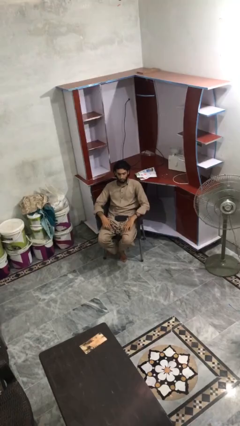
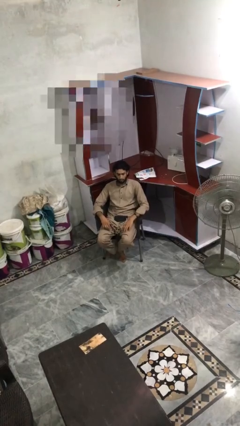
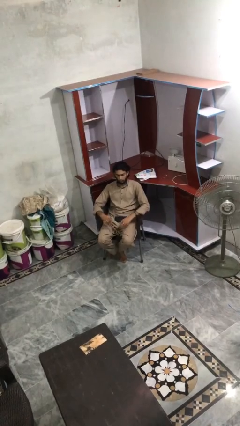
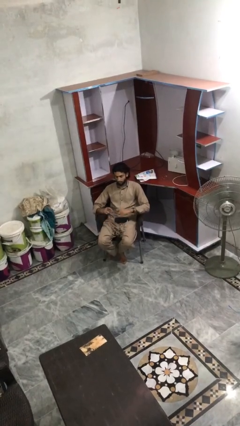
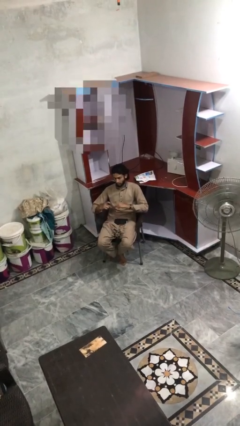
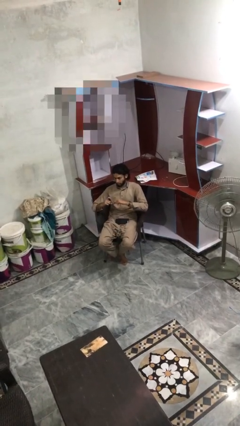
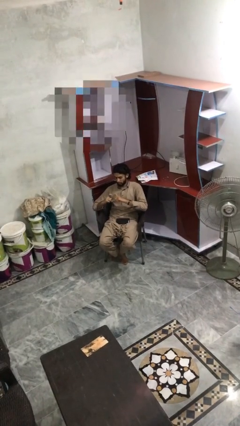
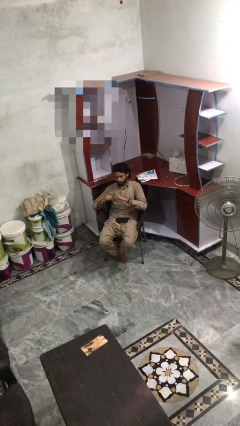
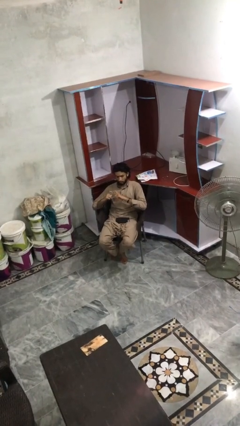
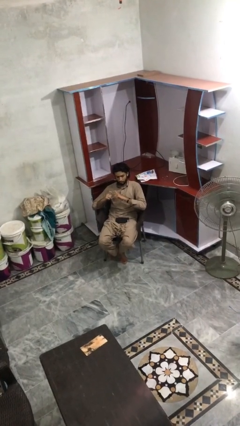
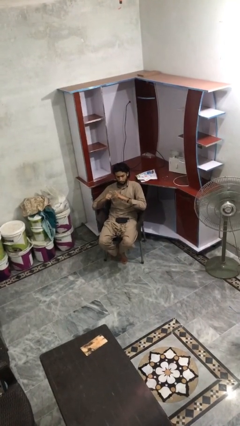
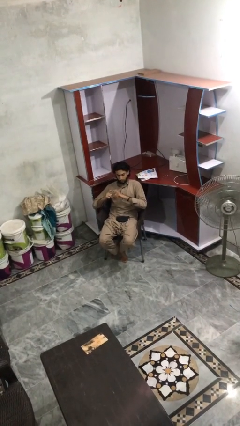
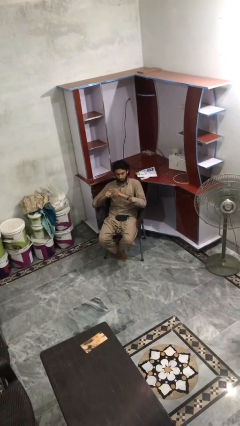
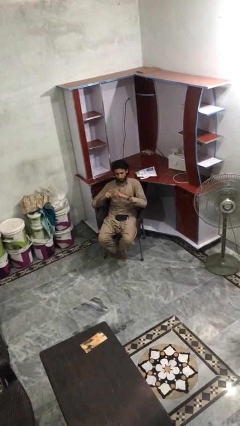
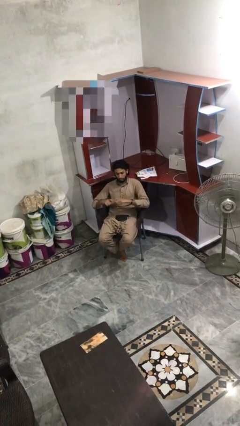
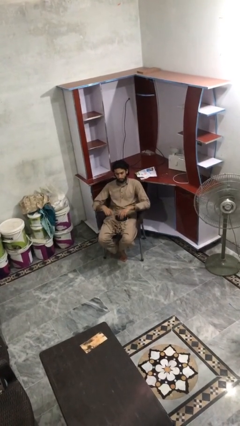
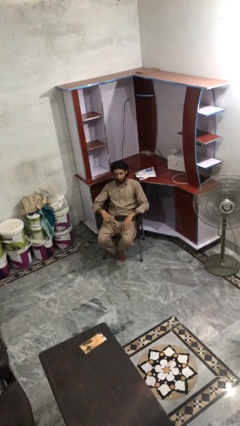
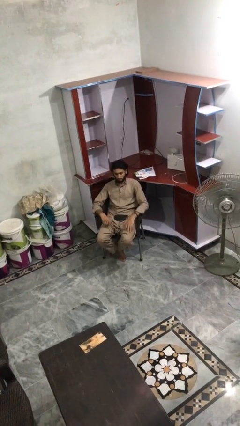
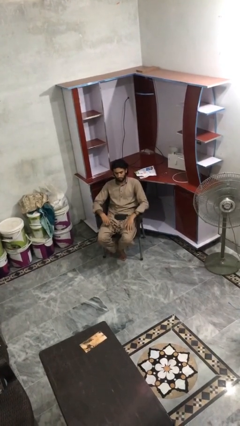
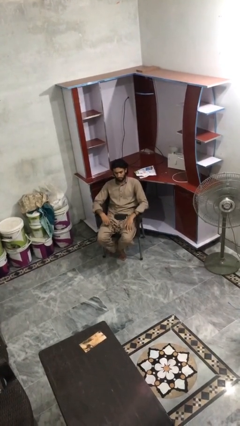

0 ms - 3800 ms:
person gestures heart

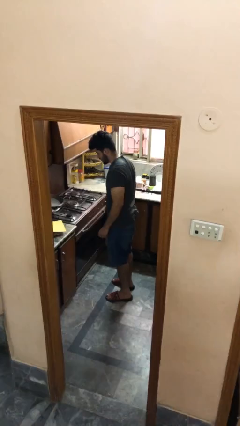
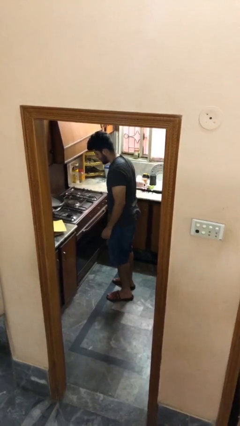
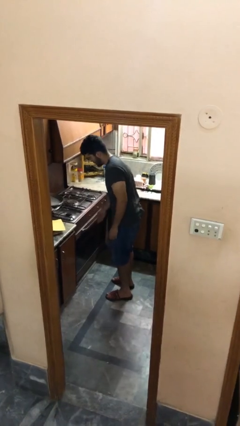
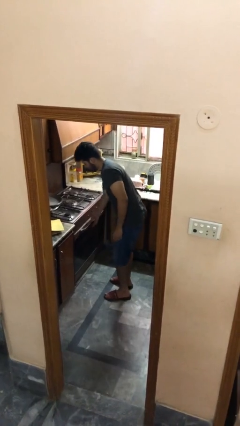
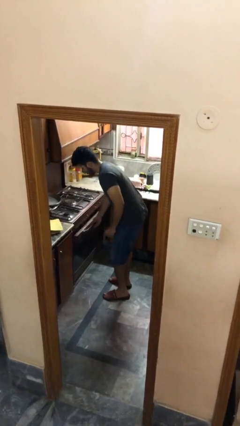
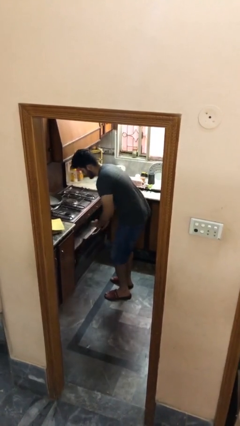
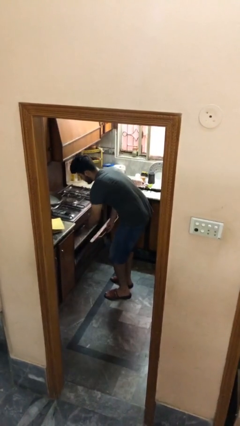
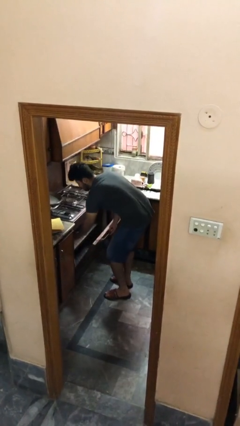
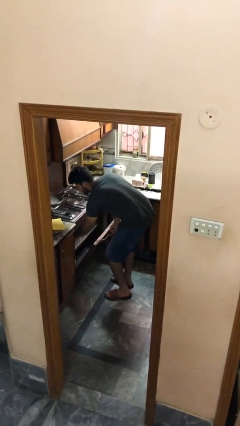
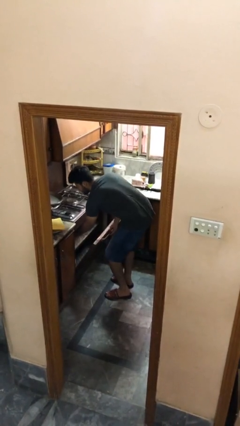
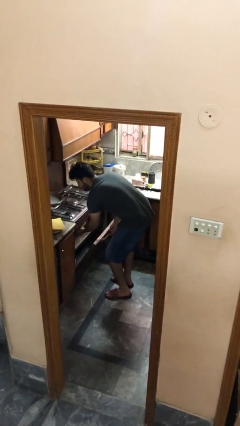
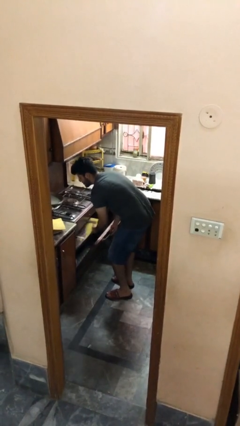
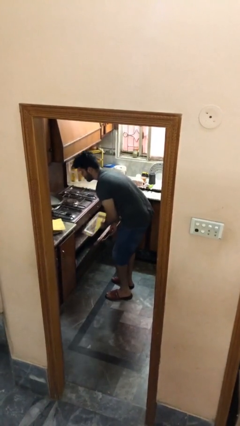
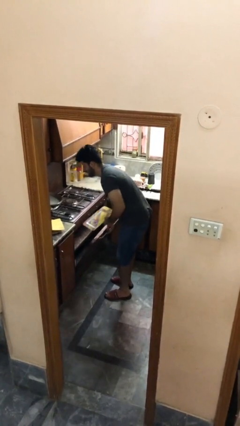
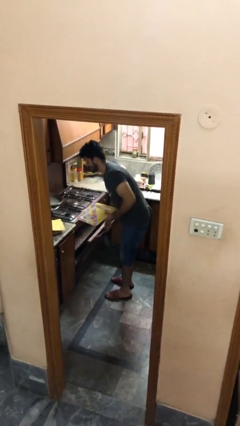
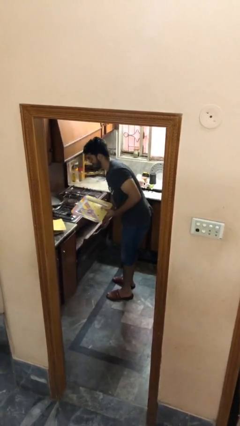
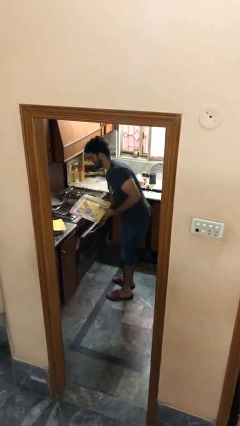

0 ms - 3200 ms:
person takes object from oven

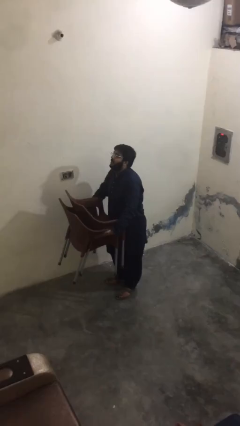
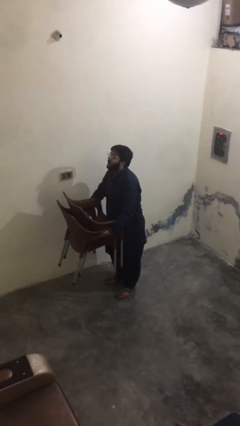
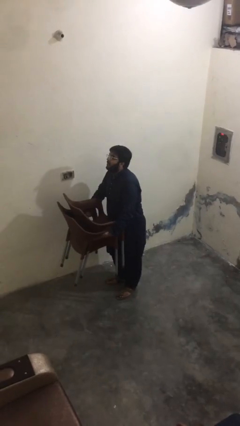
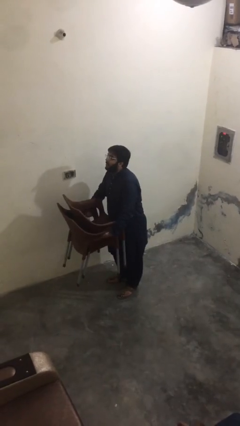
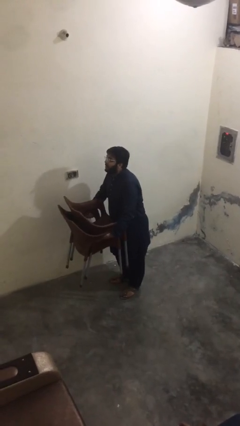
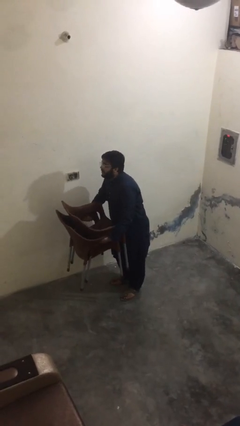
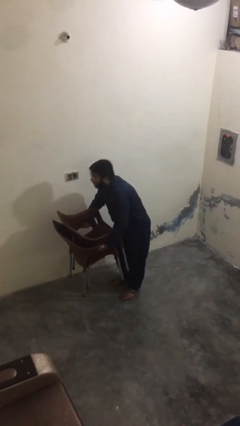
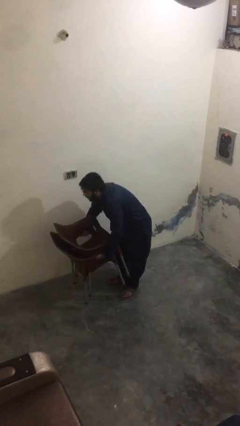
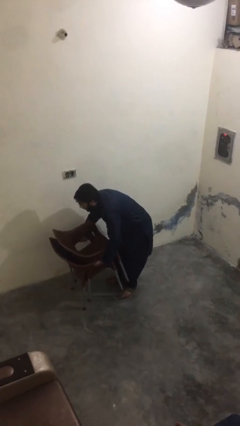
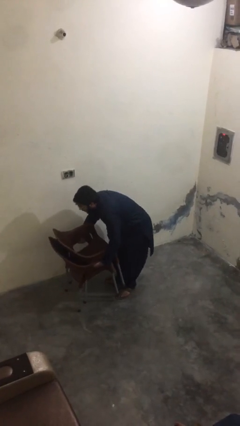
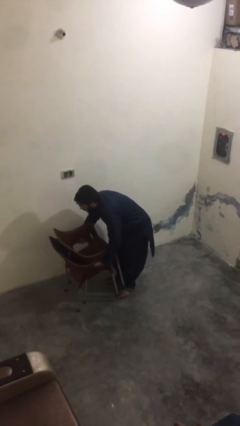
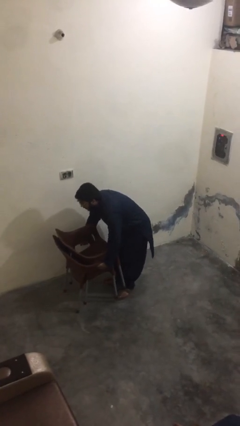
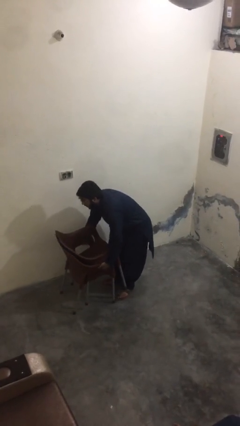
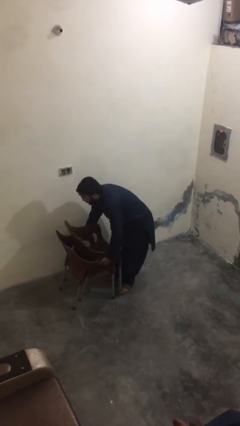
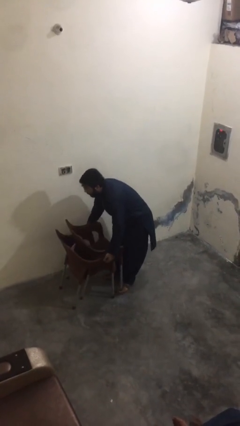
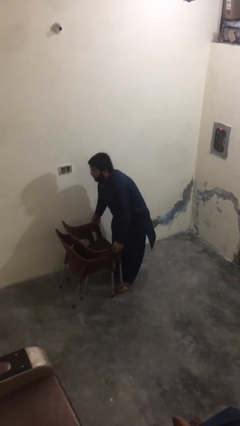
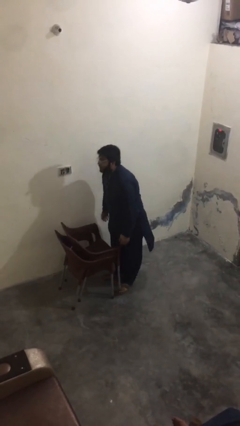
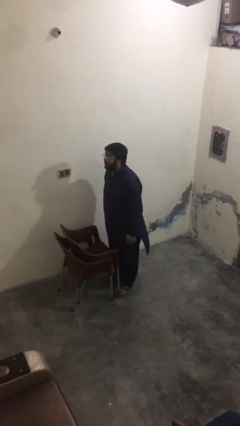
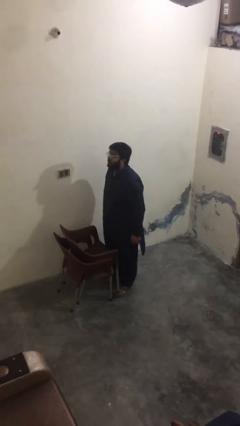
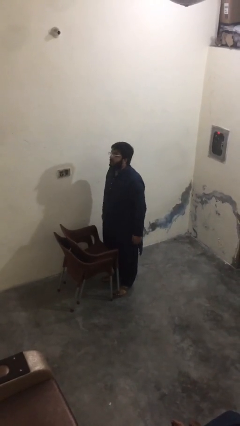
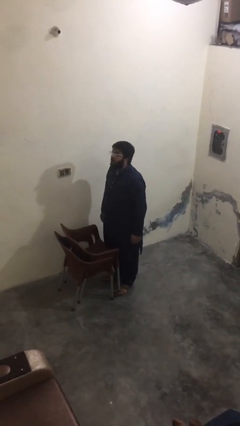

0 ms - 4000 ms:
person puts down object on floor

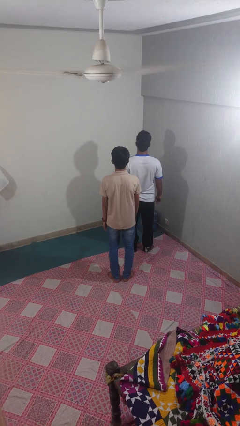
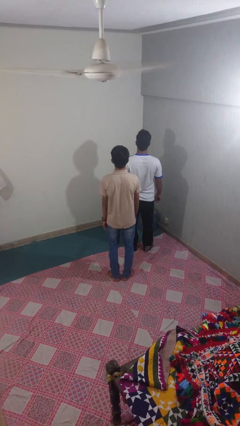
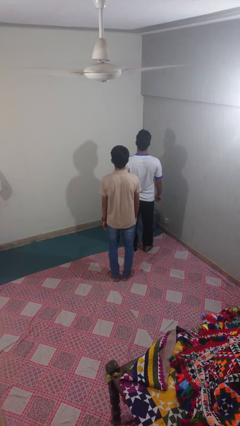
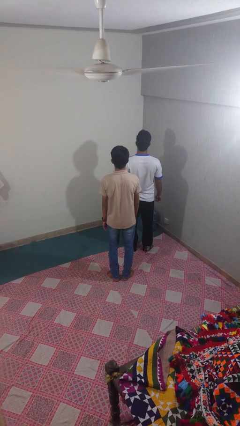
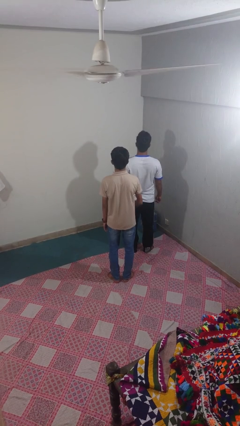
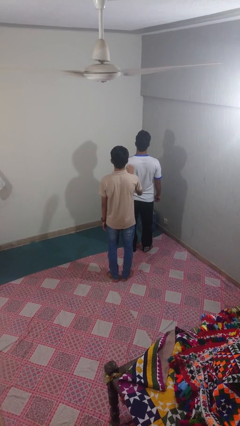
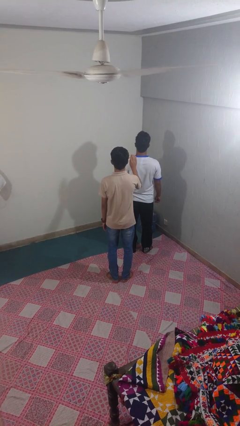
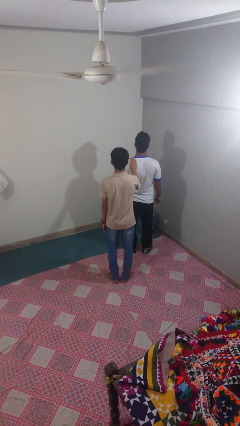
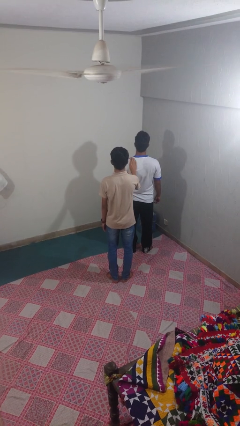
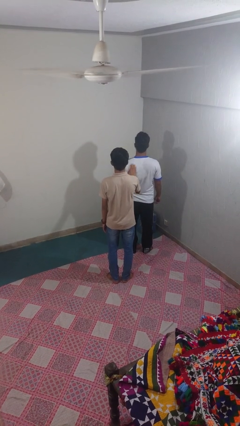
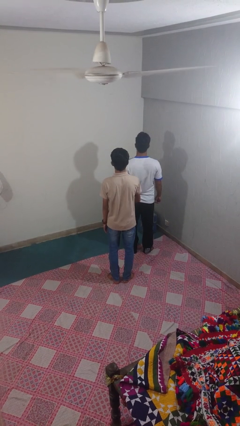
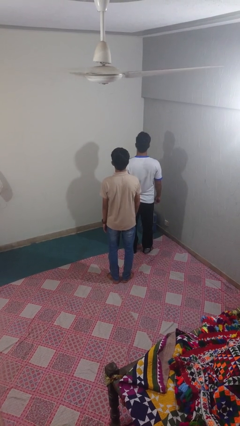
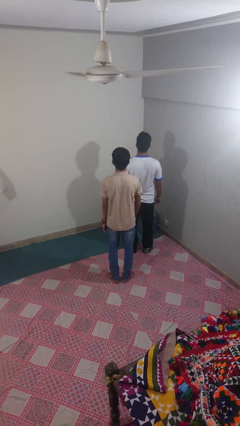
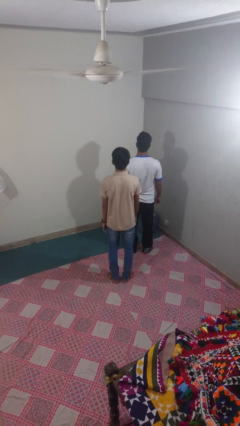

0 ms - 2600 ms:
person touches back of person

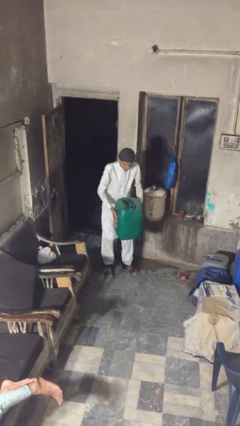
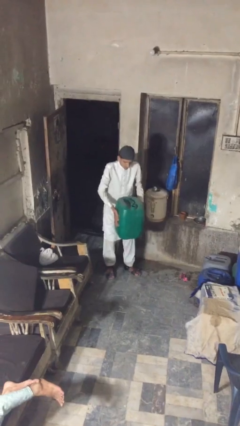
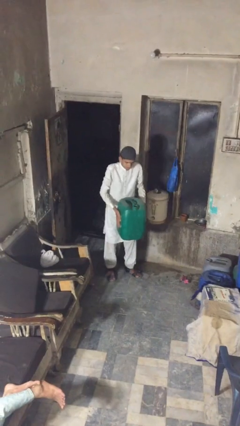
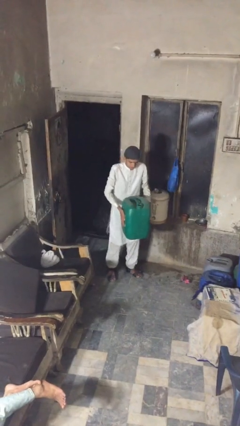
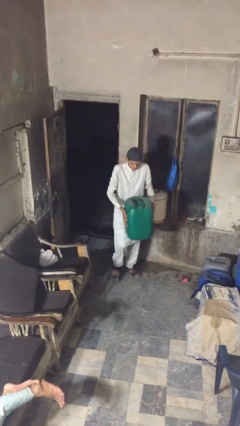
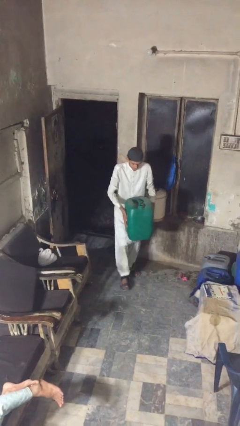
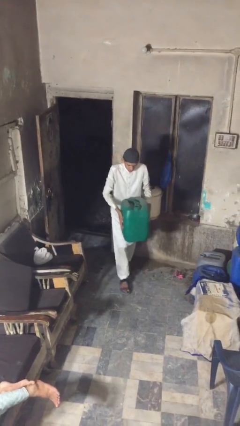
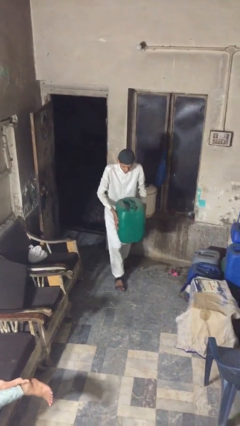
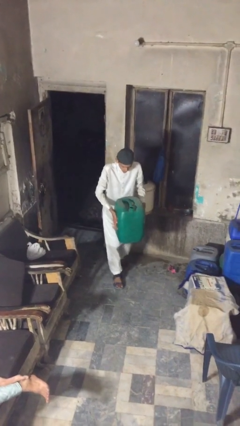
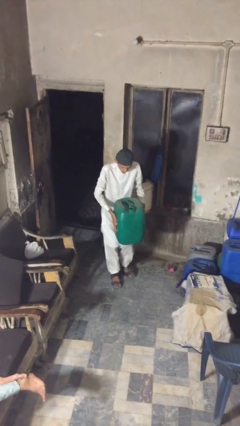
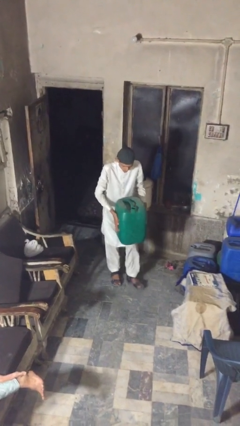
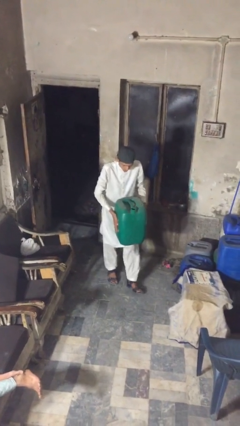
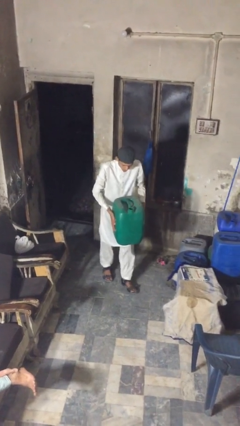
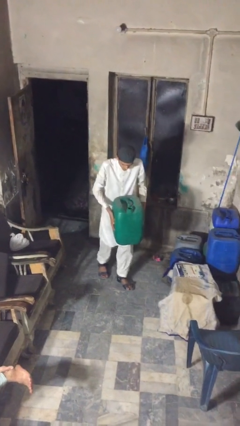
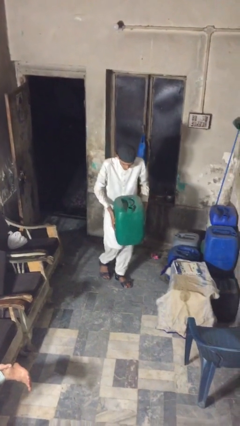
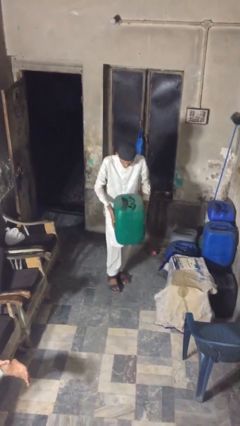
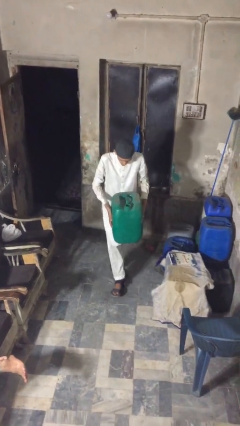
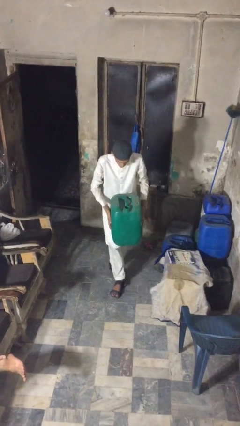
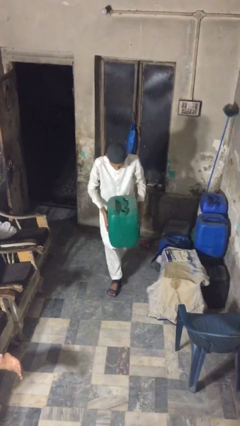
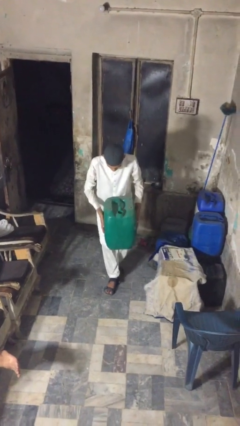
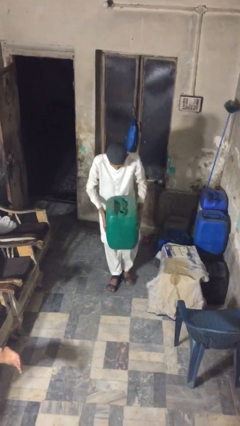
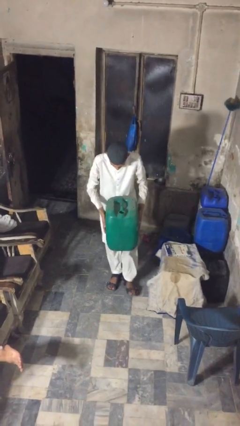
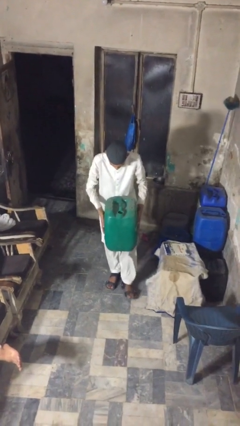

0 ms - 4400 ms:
person carries heavy object
